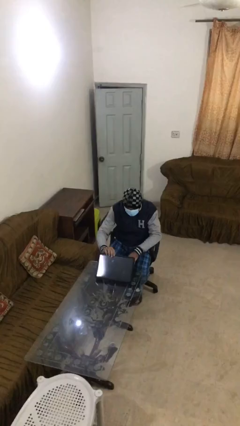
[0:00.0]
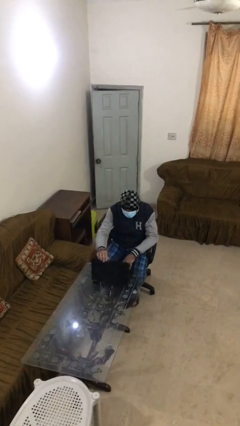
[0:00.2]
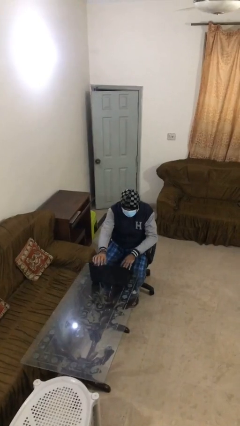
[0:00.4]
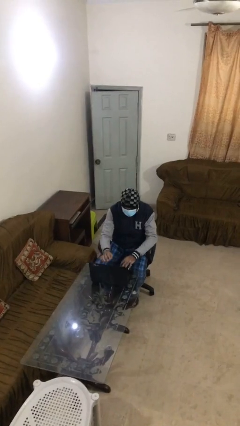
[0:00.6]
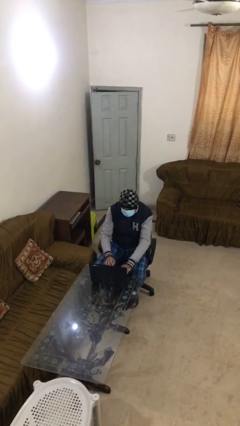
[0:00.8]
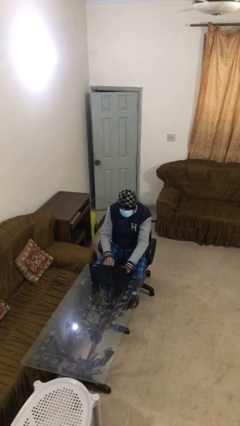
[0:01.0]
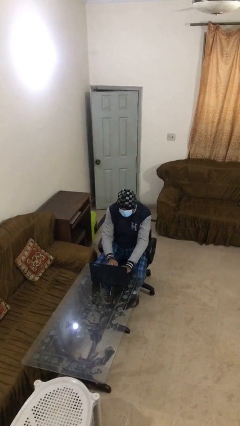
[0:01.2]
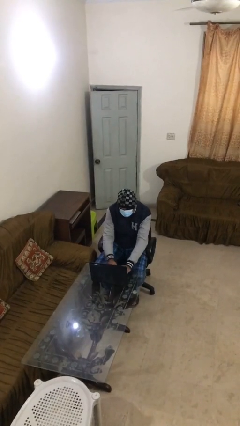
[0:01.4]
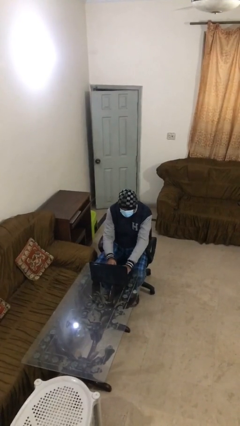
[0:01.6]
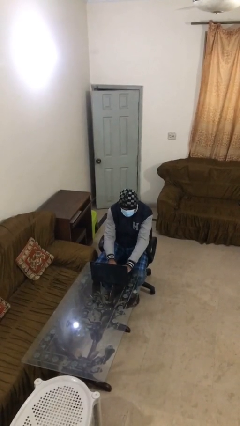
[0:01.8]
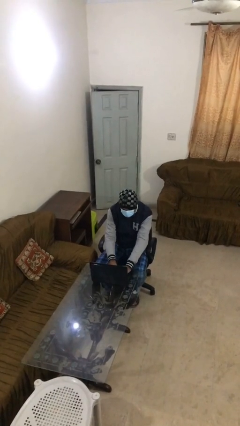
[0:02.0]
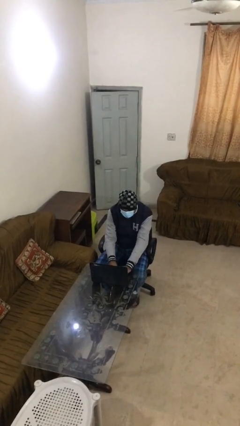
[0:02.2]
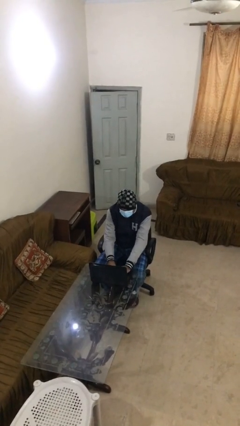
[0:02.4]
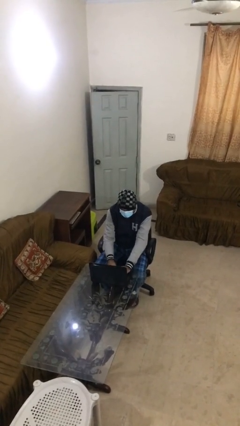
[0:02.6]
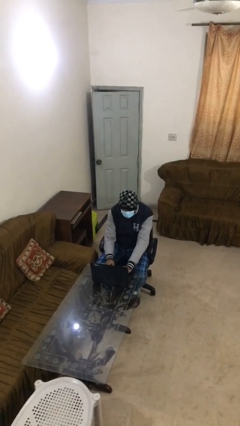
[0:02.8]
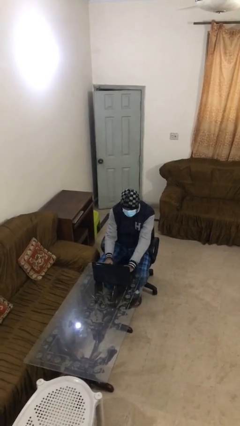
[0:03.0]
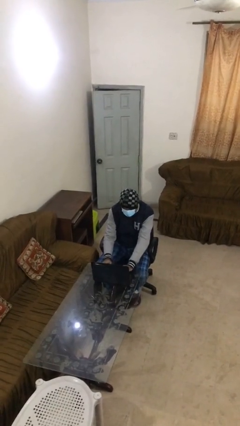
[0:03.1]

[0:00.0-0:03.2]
person interacts with laptop

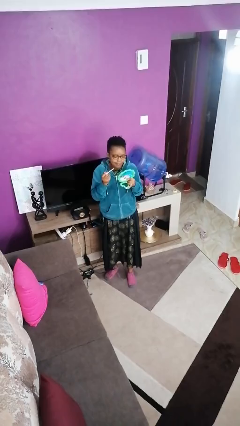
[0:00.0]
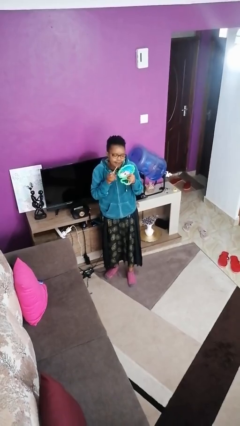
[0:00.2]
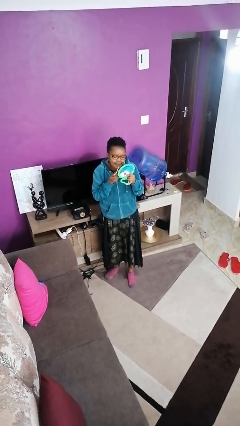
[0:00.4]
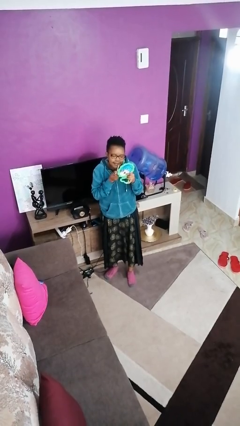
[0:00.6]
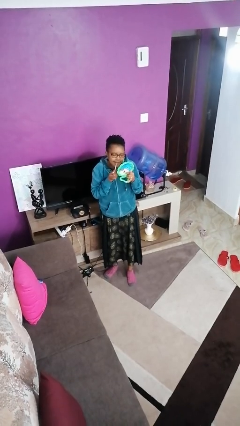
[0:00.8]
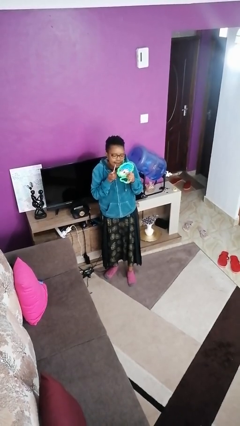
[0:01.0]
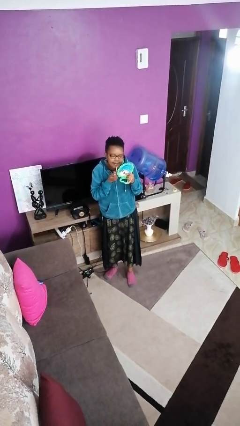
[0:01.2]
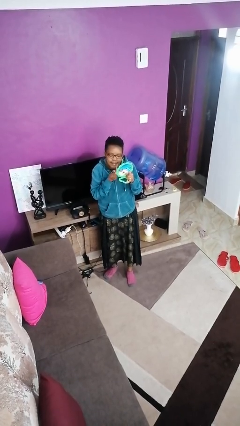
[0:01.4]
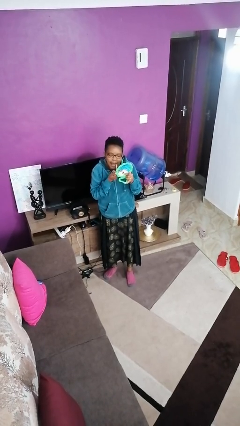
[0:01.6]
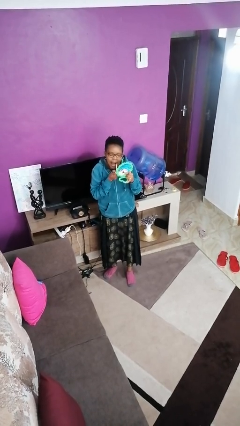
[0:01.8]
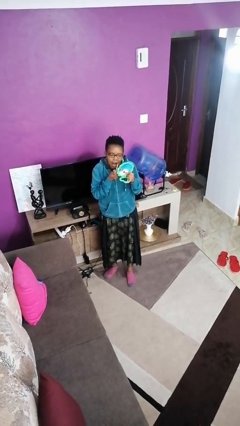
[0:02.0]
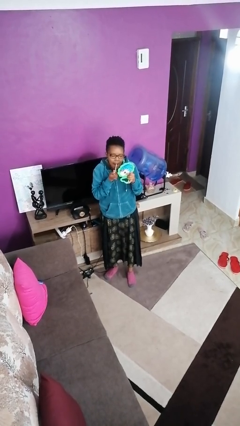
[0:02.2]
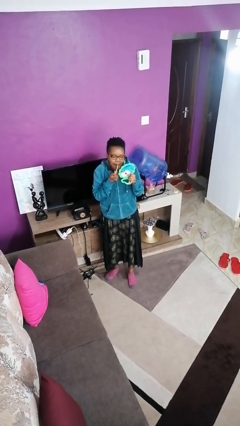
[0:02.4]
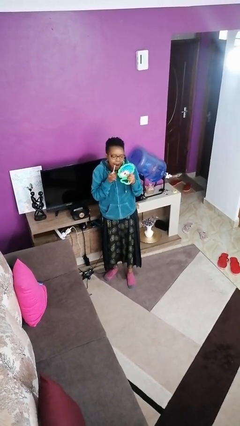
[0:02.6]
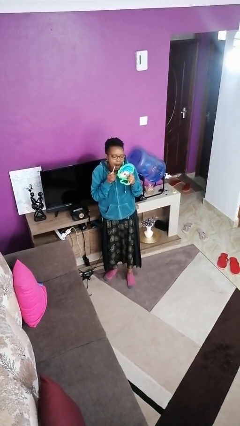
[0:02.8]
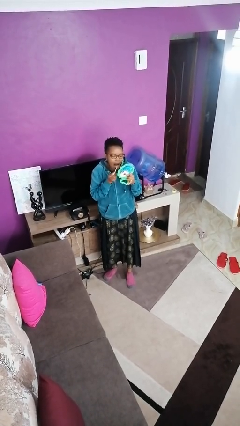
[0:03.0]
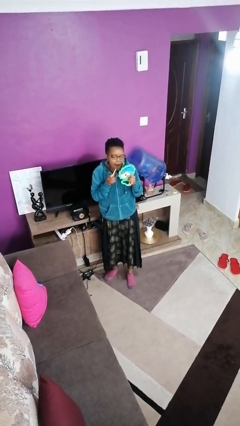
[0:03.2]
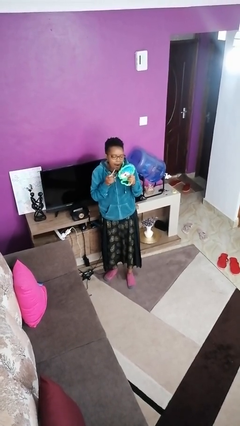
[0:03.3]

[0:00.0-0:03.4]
person applies lip makeup

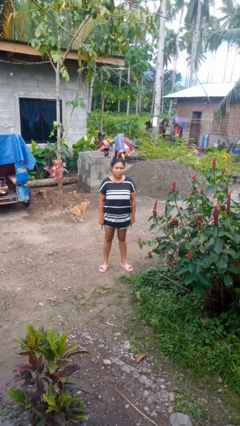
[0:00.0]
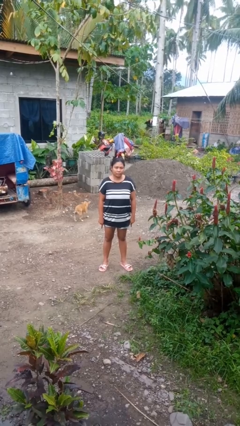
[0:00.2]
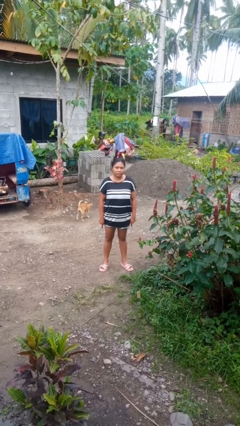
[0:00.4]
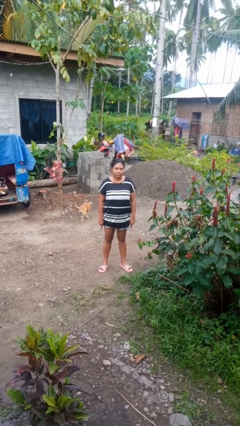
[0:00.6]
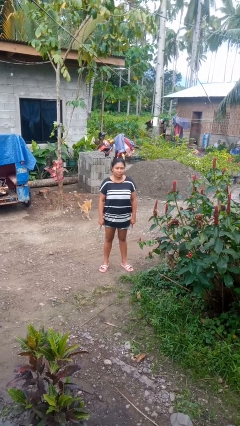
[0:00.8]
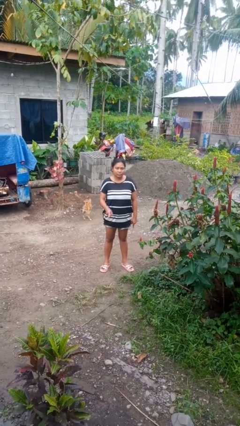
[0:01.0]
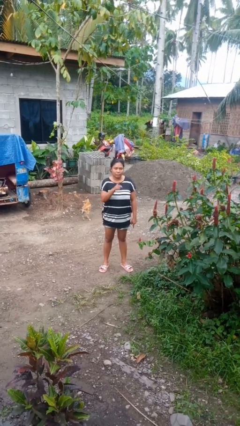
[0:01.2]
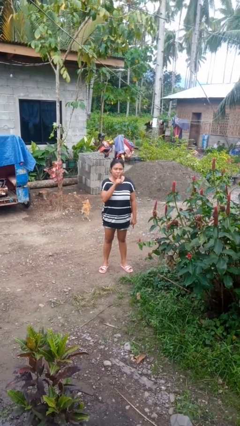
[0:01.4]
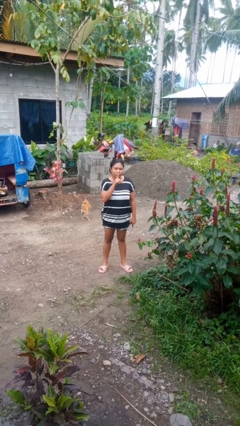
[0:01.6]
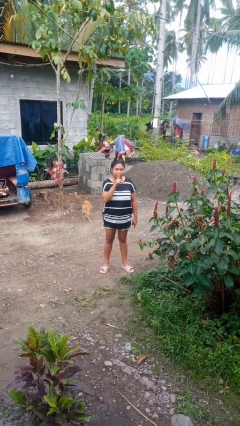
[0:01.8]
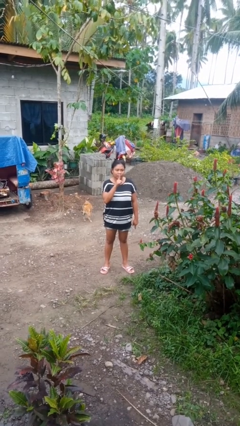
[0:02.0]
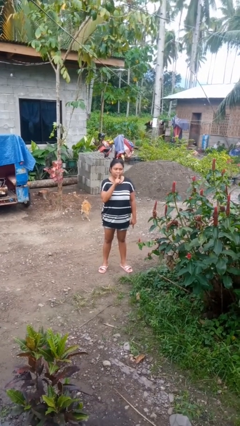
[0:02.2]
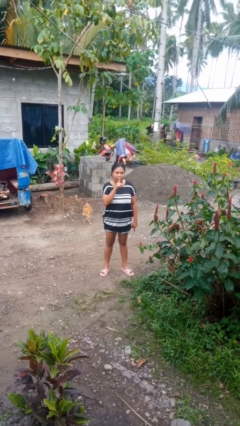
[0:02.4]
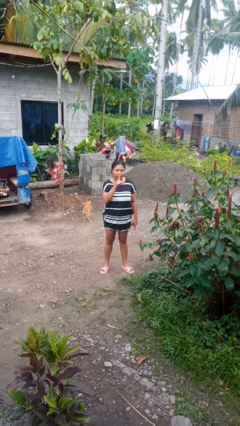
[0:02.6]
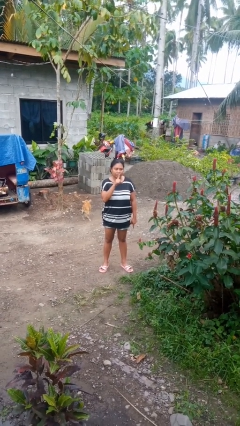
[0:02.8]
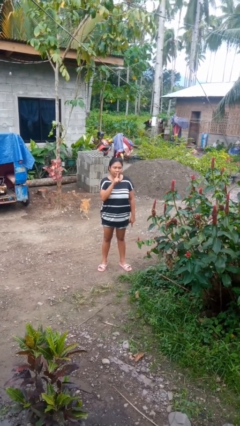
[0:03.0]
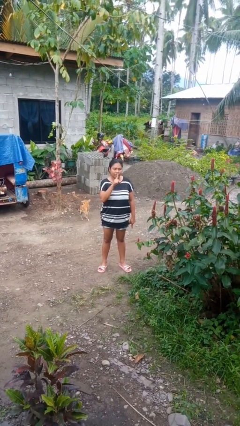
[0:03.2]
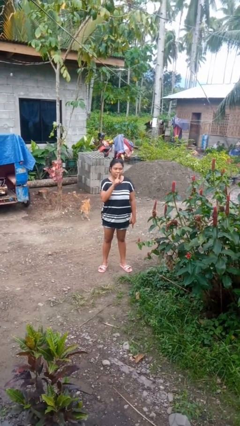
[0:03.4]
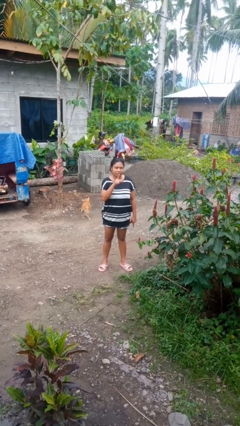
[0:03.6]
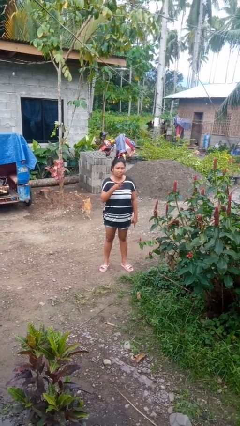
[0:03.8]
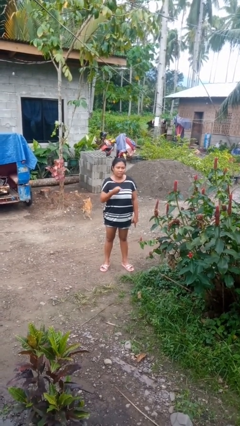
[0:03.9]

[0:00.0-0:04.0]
person gestures be quiet

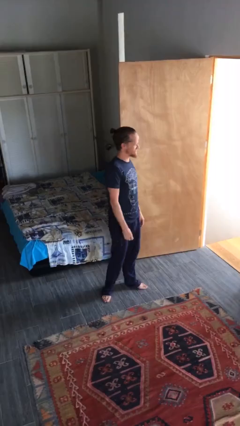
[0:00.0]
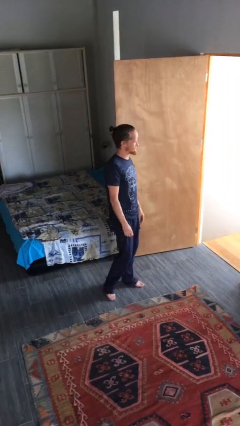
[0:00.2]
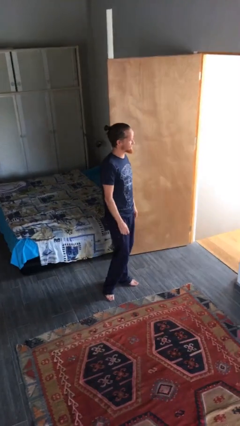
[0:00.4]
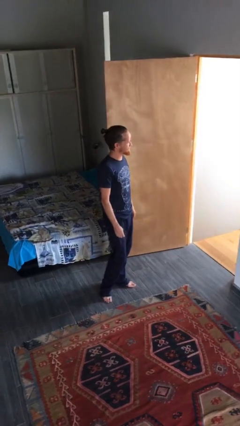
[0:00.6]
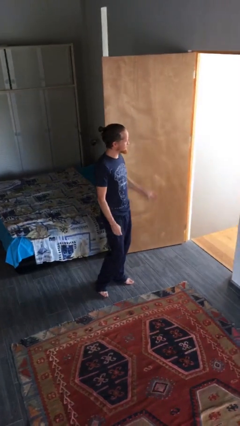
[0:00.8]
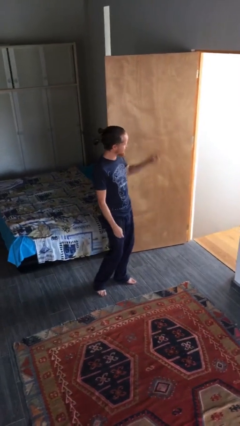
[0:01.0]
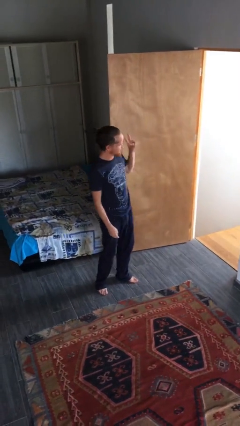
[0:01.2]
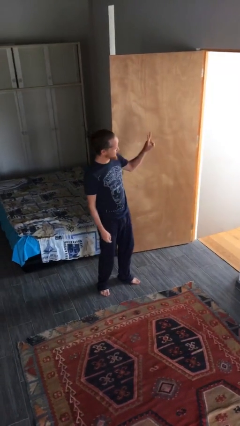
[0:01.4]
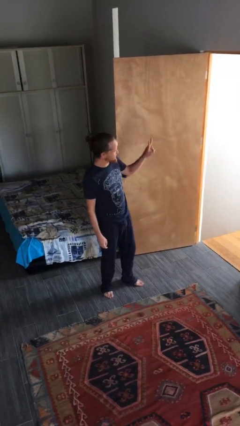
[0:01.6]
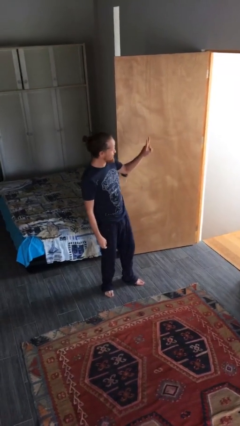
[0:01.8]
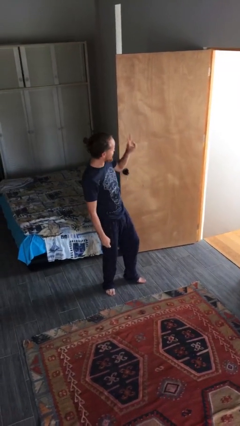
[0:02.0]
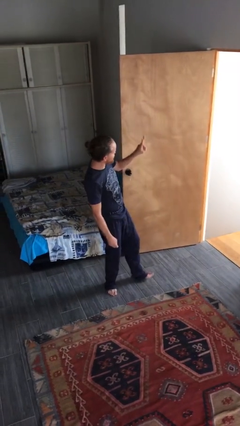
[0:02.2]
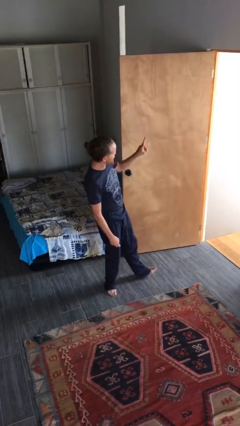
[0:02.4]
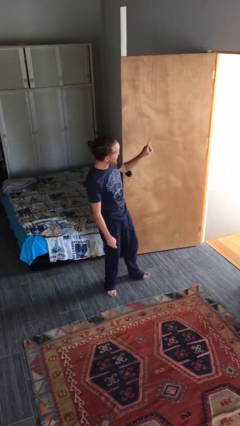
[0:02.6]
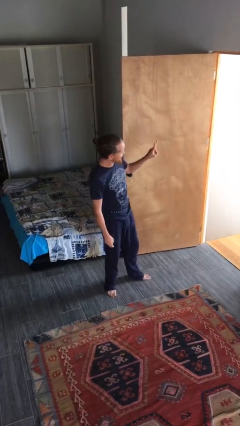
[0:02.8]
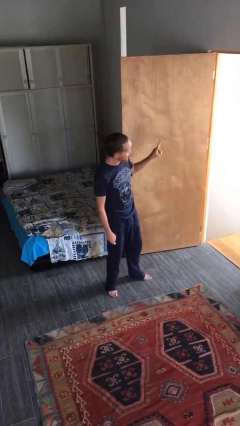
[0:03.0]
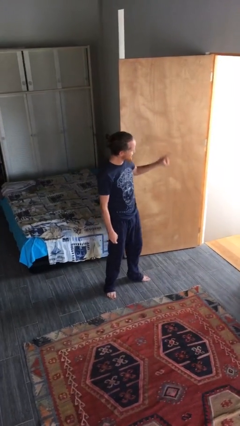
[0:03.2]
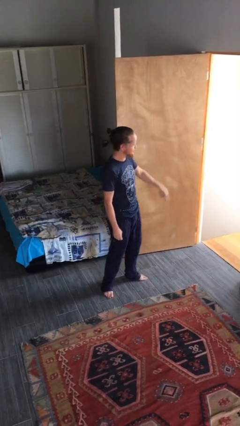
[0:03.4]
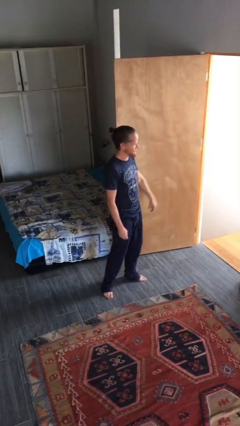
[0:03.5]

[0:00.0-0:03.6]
person gestures peace

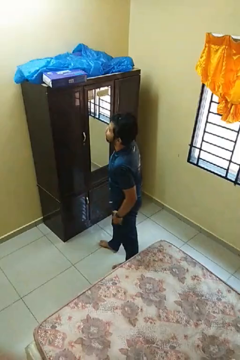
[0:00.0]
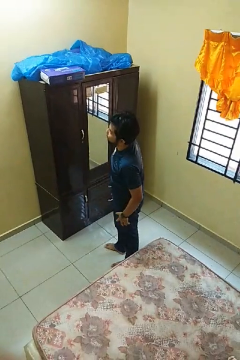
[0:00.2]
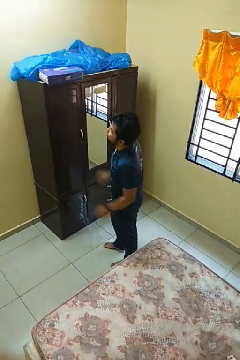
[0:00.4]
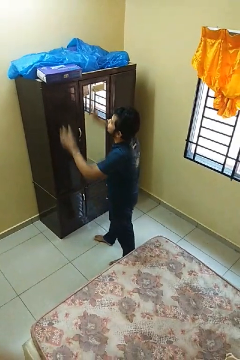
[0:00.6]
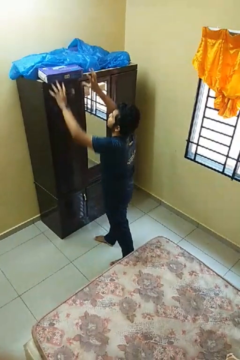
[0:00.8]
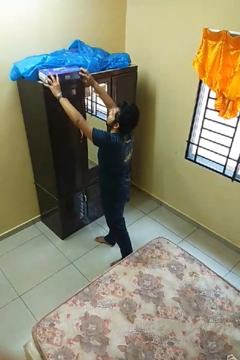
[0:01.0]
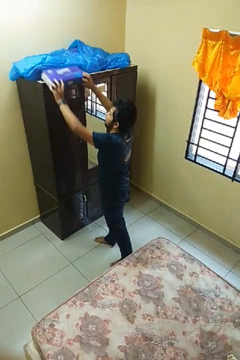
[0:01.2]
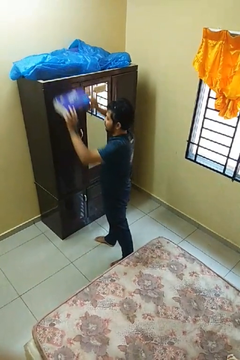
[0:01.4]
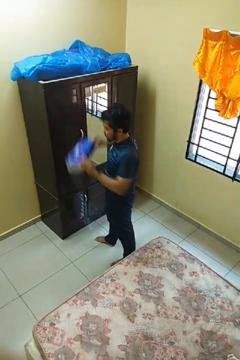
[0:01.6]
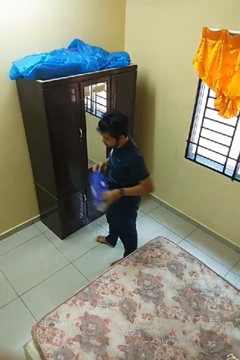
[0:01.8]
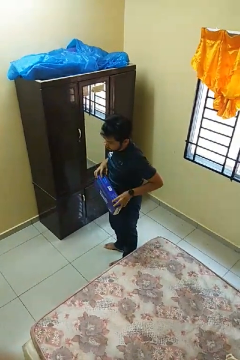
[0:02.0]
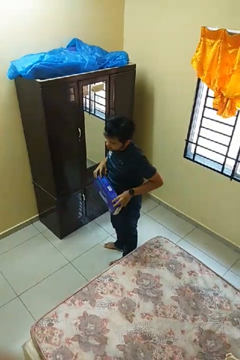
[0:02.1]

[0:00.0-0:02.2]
person picks up object from countertop

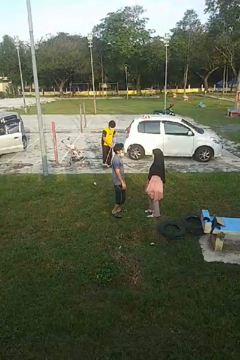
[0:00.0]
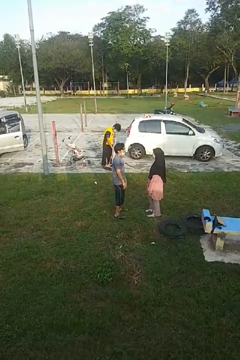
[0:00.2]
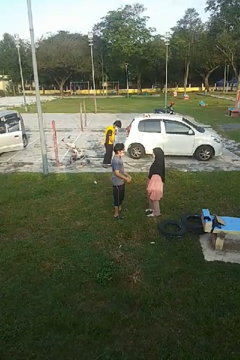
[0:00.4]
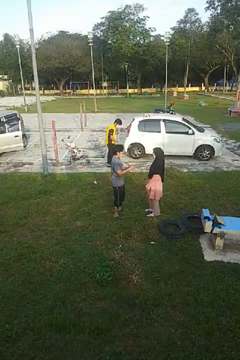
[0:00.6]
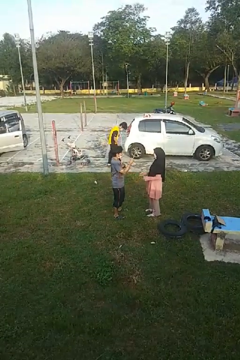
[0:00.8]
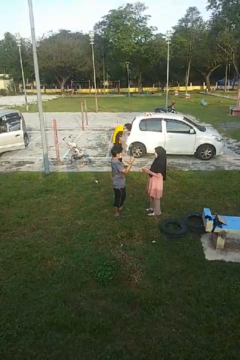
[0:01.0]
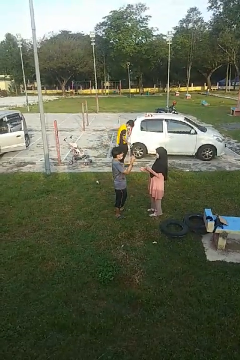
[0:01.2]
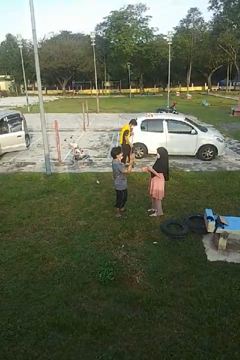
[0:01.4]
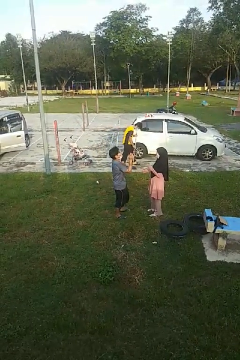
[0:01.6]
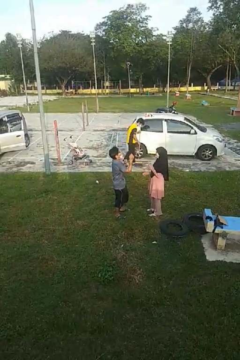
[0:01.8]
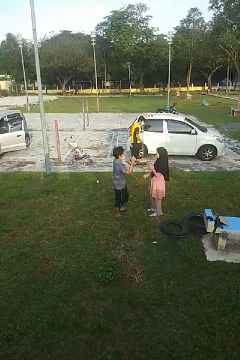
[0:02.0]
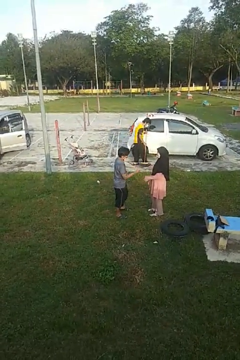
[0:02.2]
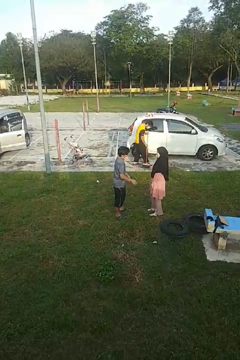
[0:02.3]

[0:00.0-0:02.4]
person laughs with person
